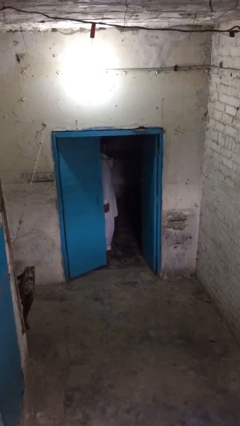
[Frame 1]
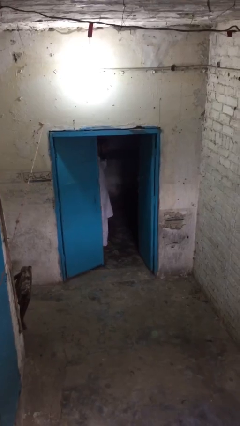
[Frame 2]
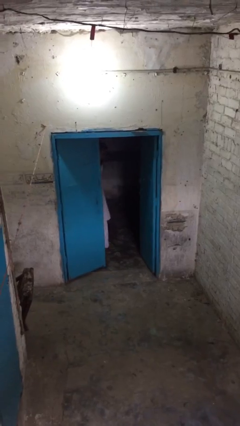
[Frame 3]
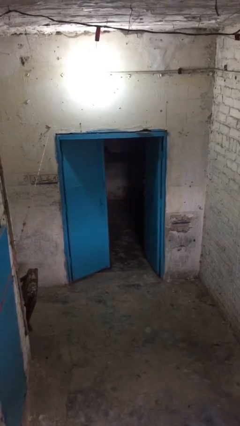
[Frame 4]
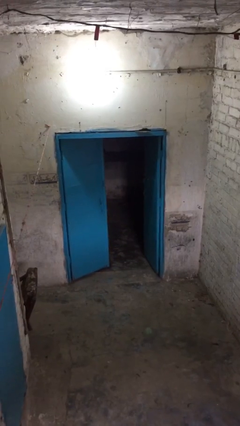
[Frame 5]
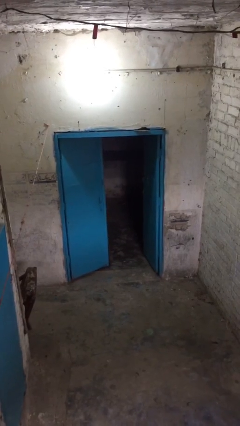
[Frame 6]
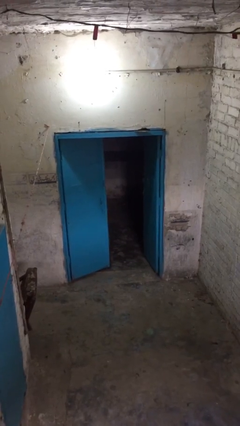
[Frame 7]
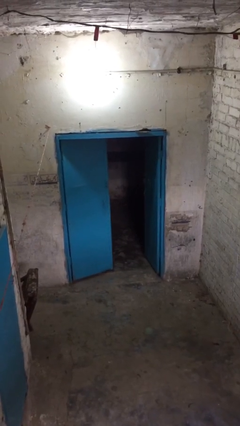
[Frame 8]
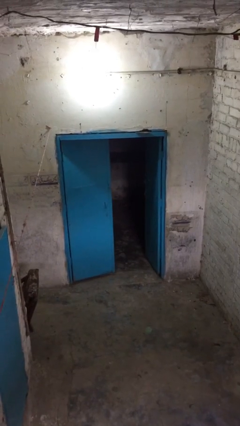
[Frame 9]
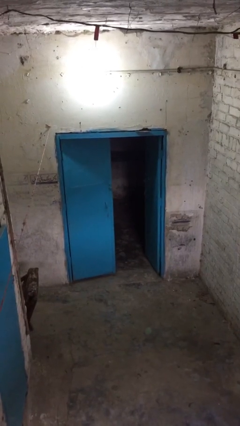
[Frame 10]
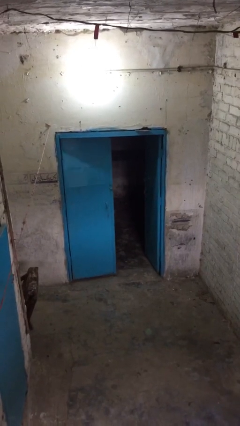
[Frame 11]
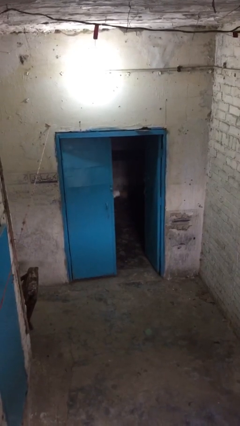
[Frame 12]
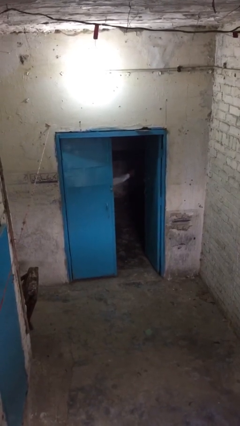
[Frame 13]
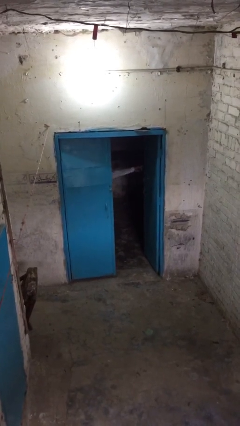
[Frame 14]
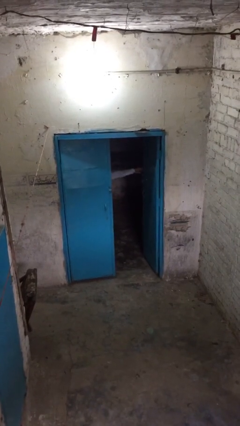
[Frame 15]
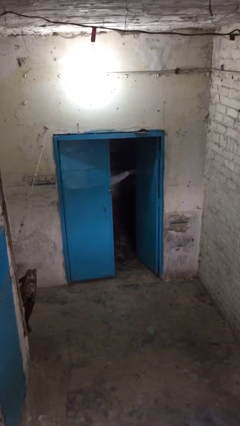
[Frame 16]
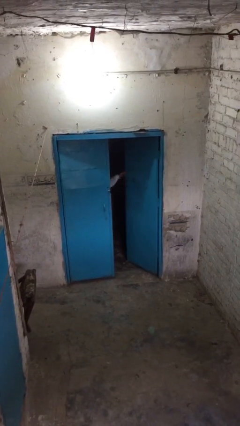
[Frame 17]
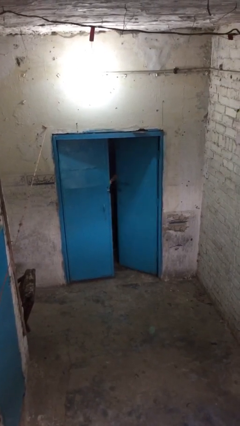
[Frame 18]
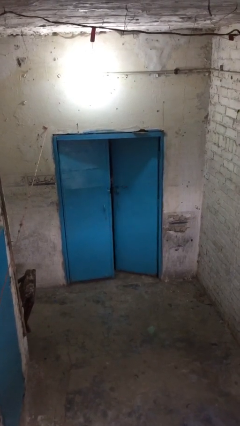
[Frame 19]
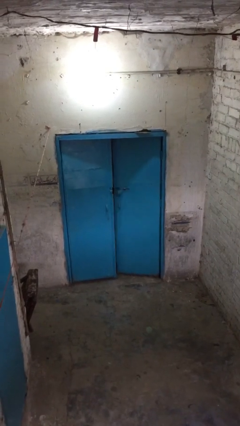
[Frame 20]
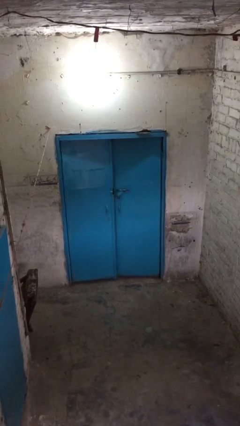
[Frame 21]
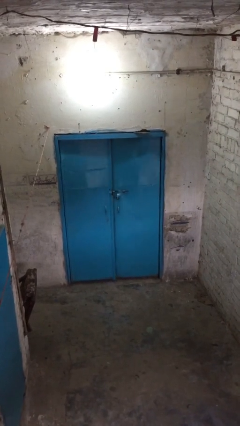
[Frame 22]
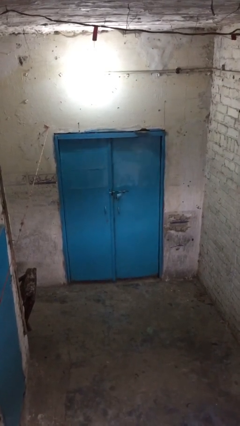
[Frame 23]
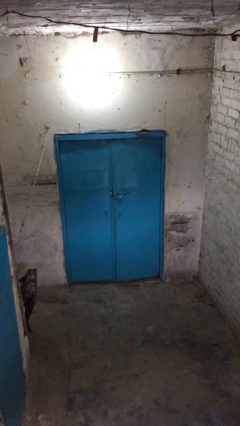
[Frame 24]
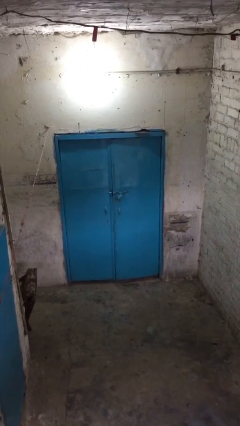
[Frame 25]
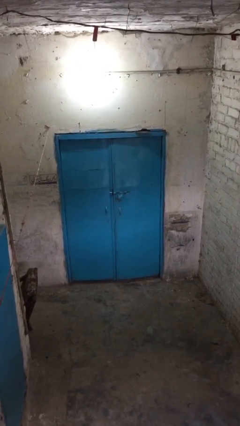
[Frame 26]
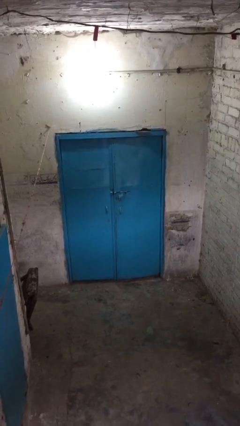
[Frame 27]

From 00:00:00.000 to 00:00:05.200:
person closes facility door

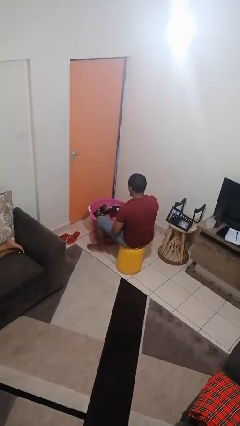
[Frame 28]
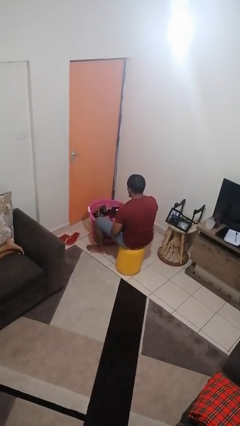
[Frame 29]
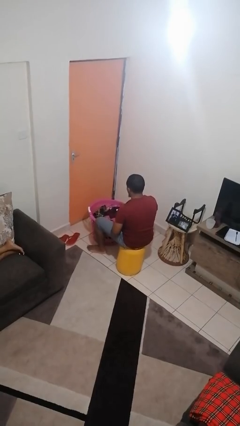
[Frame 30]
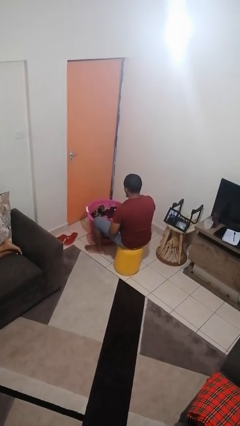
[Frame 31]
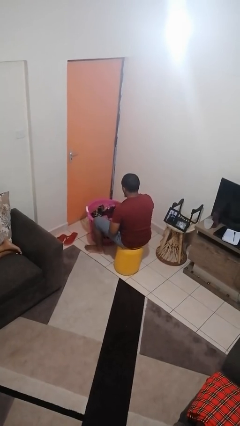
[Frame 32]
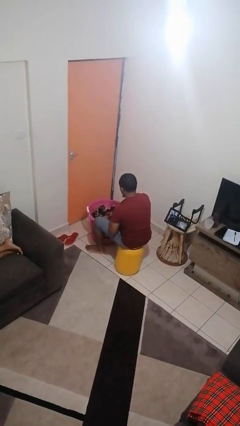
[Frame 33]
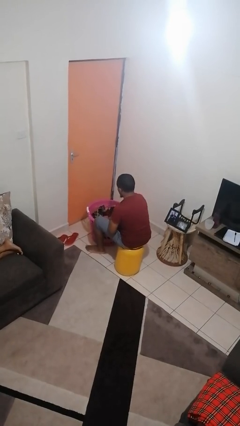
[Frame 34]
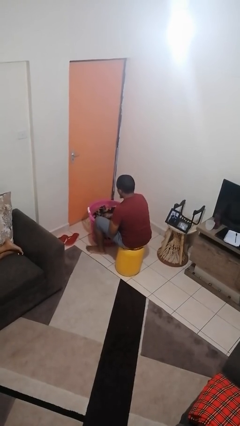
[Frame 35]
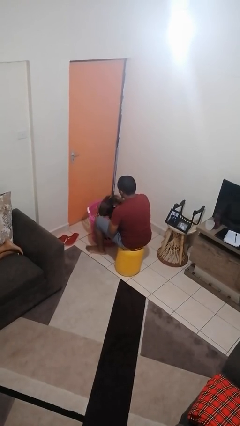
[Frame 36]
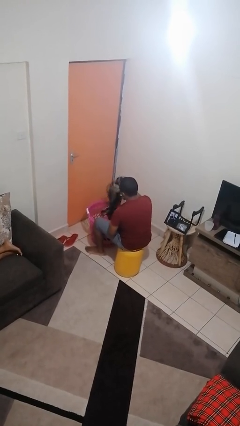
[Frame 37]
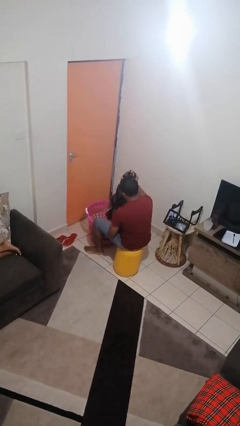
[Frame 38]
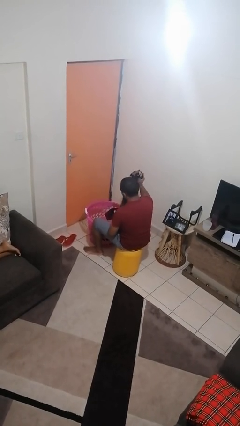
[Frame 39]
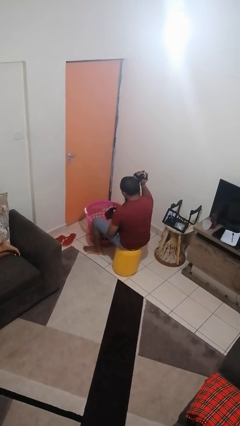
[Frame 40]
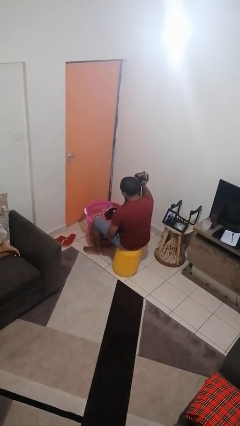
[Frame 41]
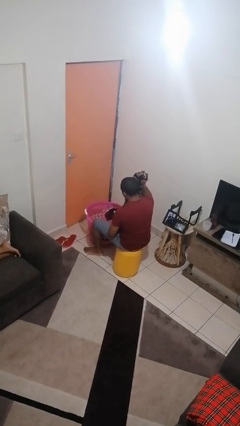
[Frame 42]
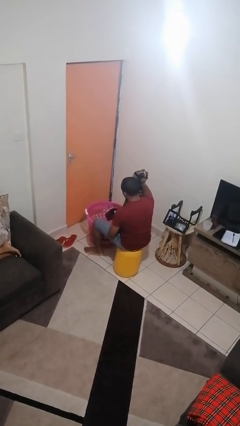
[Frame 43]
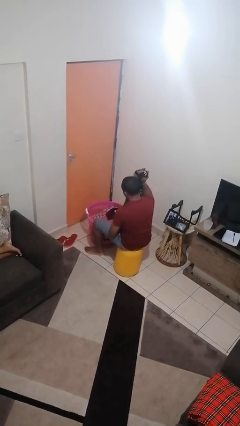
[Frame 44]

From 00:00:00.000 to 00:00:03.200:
person takes object from basket

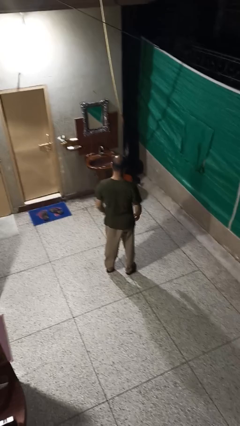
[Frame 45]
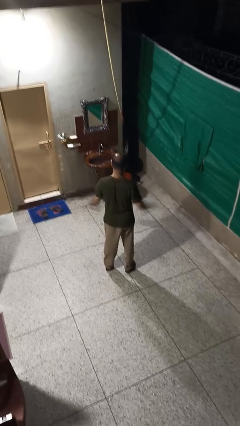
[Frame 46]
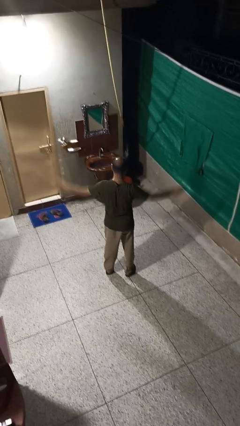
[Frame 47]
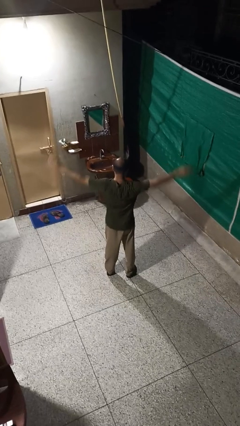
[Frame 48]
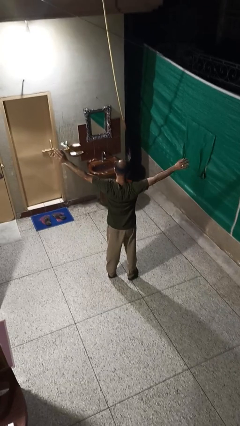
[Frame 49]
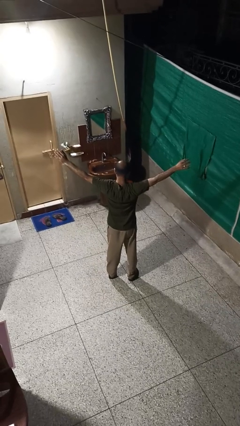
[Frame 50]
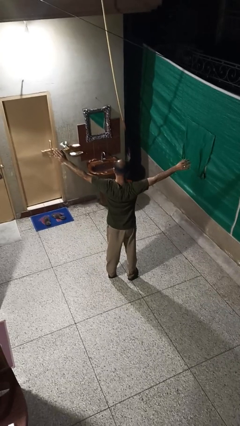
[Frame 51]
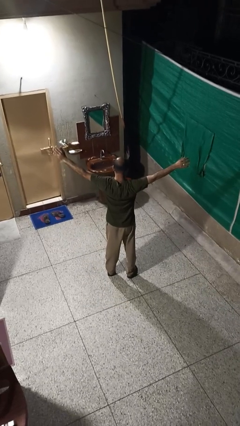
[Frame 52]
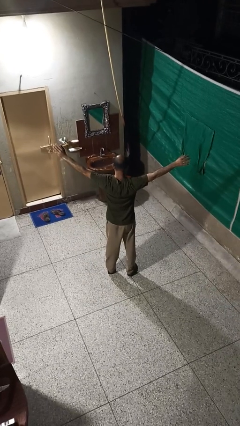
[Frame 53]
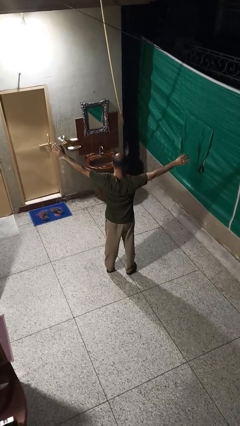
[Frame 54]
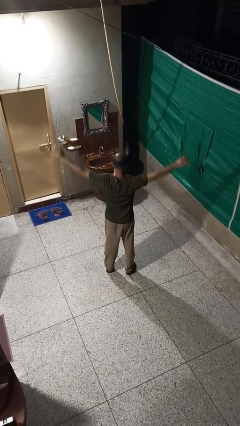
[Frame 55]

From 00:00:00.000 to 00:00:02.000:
person stretches arms to side

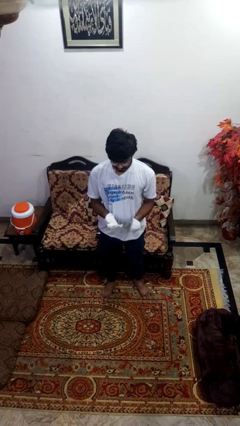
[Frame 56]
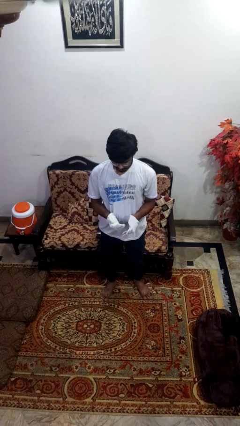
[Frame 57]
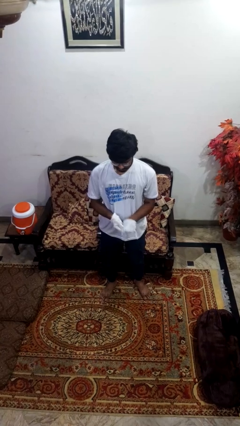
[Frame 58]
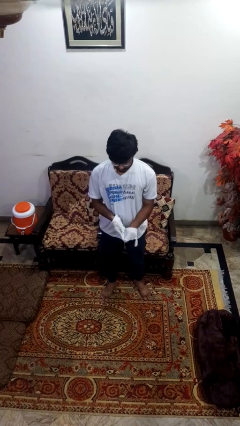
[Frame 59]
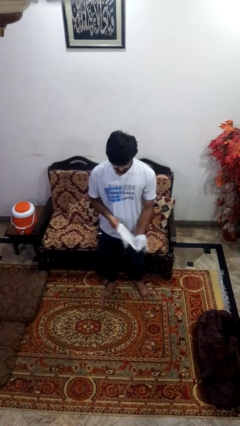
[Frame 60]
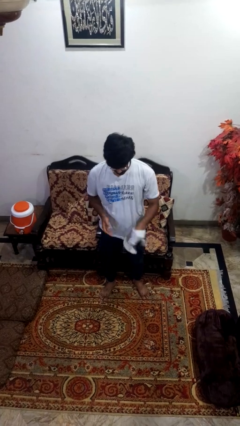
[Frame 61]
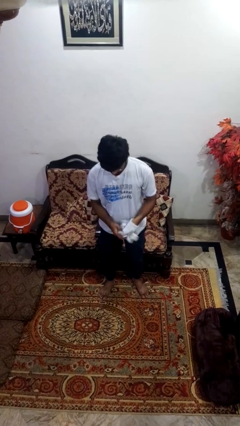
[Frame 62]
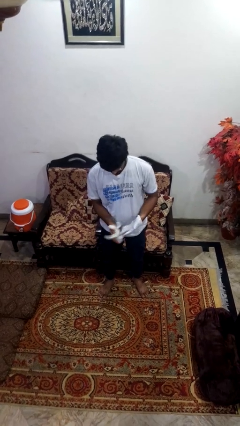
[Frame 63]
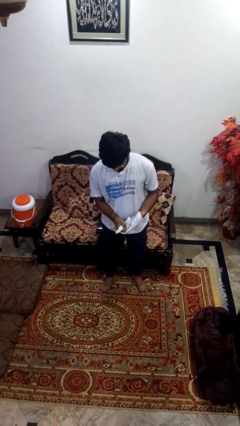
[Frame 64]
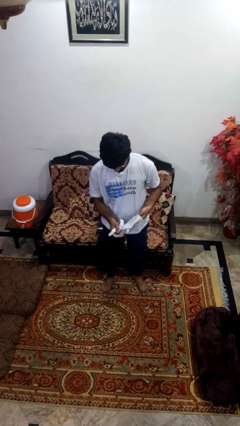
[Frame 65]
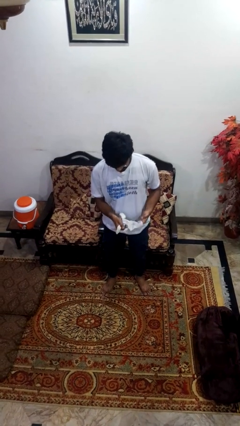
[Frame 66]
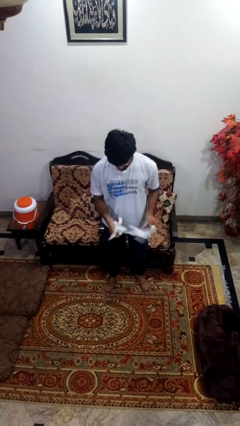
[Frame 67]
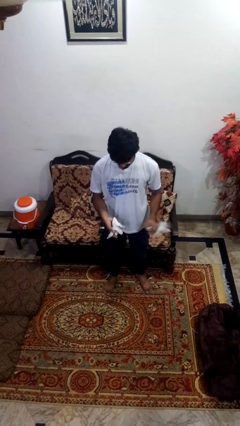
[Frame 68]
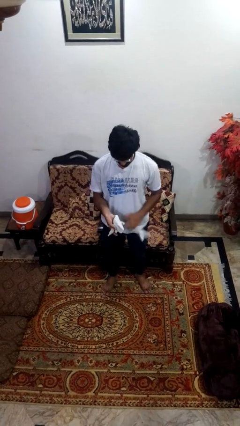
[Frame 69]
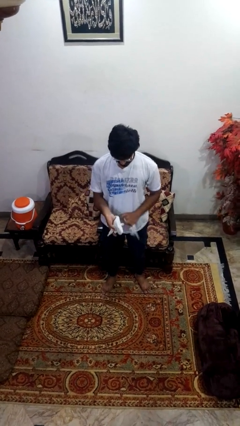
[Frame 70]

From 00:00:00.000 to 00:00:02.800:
person takes off gloves

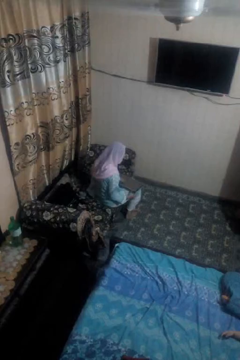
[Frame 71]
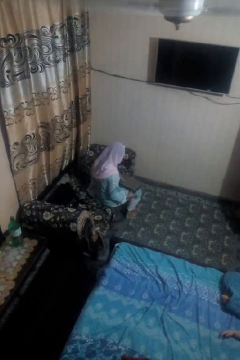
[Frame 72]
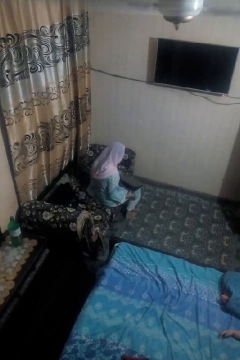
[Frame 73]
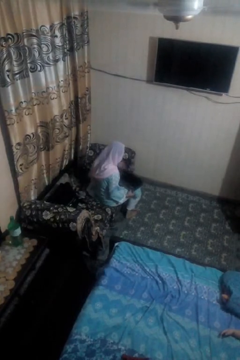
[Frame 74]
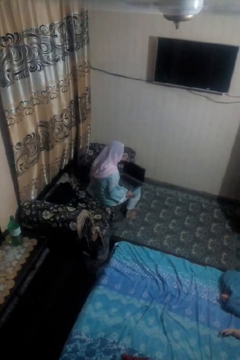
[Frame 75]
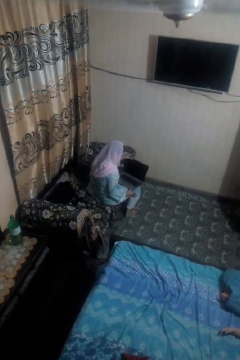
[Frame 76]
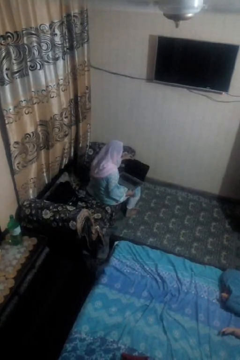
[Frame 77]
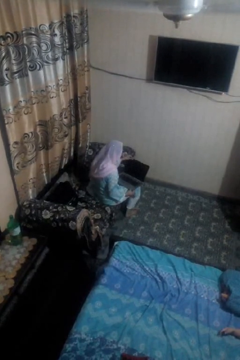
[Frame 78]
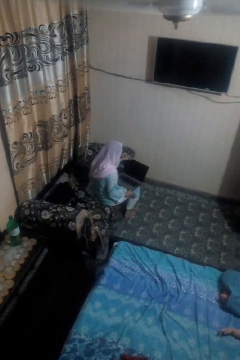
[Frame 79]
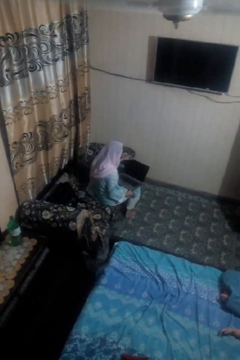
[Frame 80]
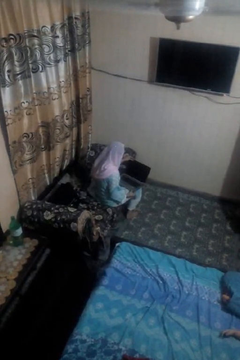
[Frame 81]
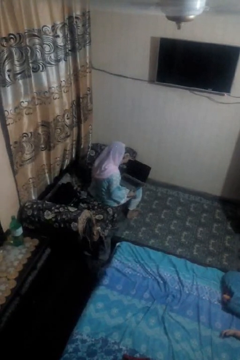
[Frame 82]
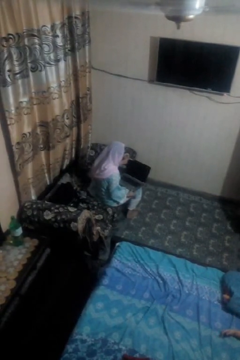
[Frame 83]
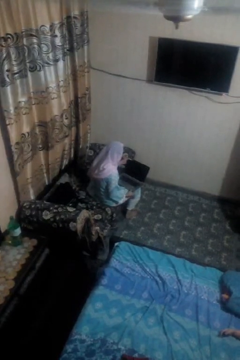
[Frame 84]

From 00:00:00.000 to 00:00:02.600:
person opens laptop

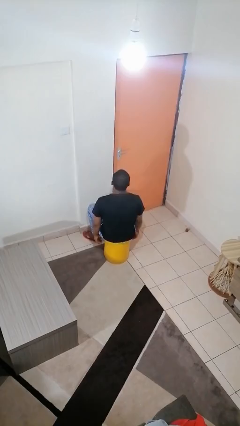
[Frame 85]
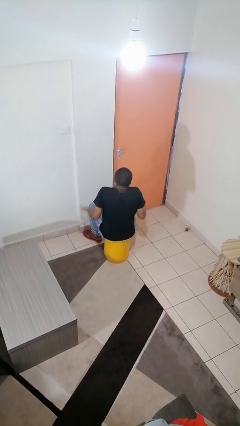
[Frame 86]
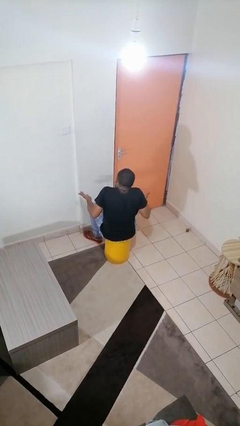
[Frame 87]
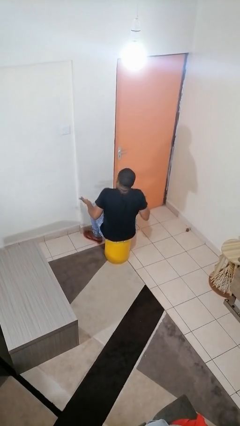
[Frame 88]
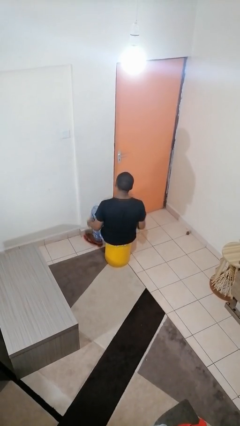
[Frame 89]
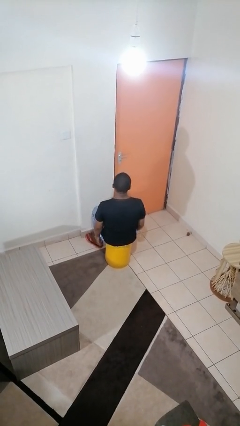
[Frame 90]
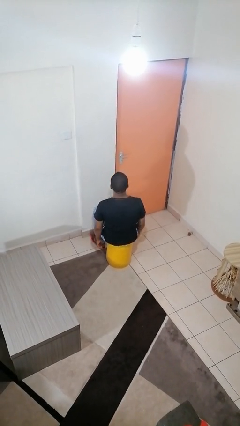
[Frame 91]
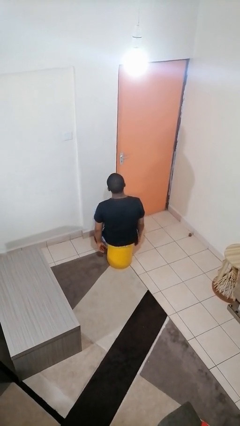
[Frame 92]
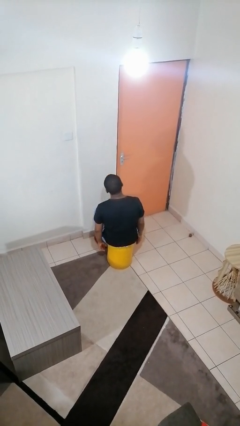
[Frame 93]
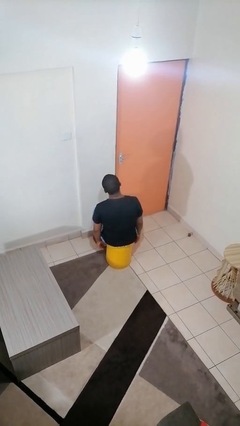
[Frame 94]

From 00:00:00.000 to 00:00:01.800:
person shrugs
